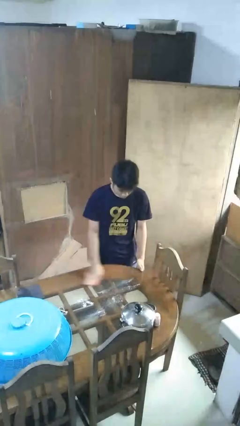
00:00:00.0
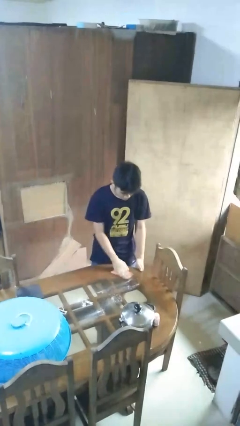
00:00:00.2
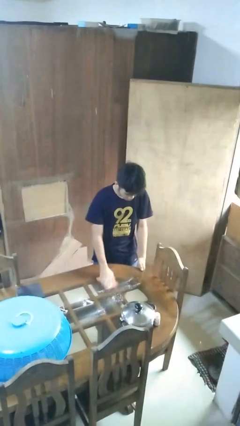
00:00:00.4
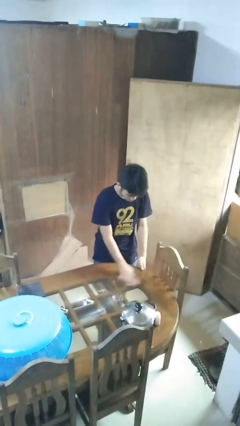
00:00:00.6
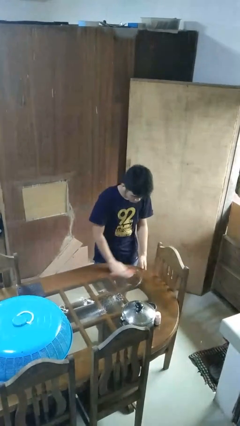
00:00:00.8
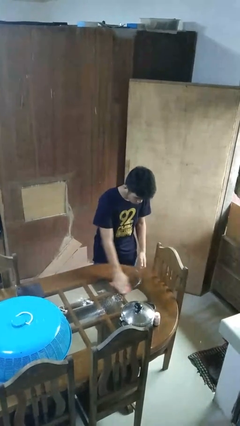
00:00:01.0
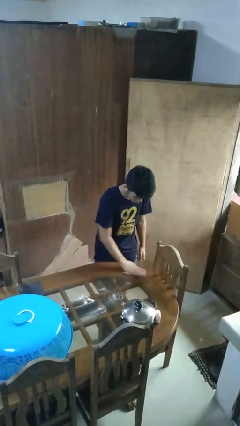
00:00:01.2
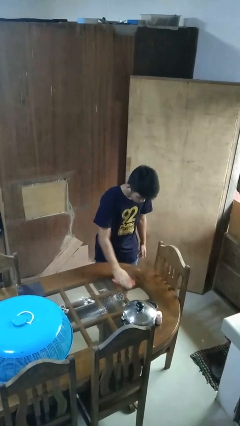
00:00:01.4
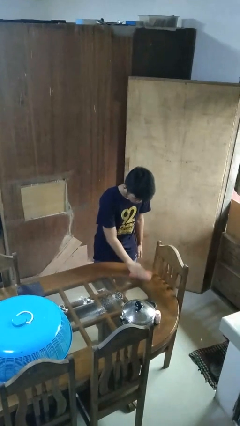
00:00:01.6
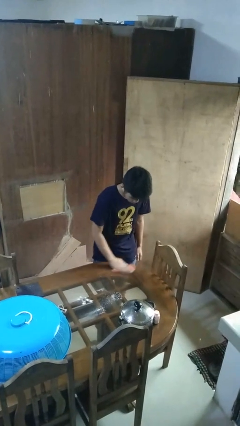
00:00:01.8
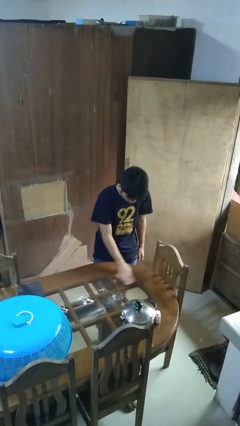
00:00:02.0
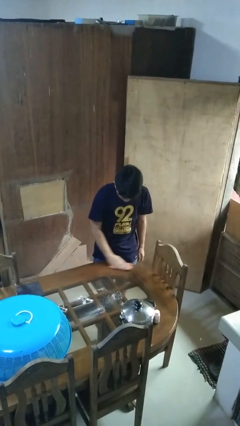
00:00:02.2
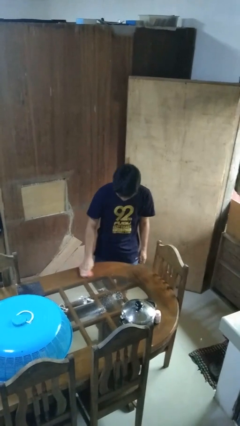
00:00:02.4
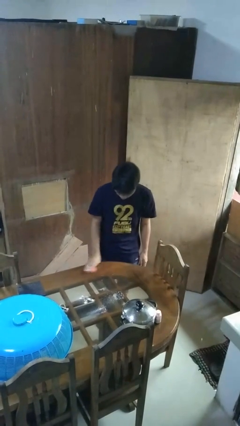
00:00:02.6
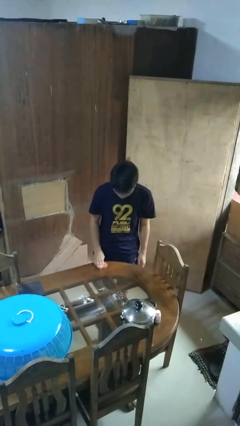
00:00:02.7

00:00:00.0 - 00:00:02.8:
person cleans table with rag

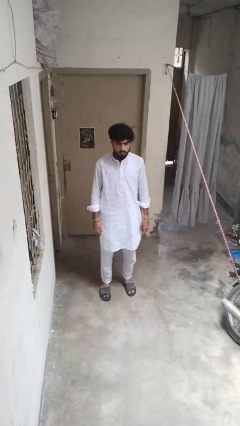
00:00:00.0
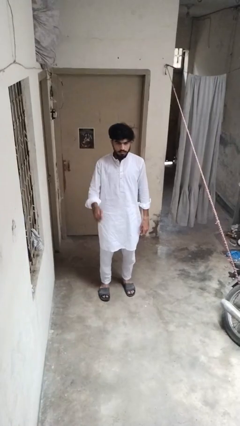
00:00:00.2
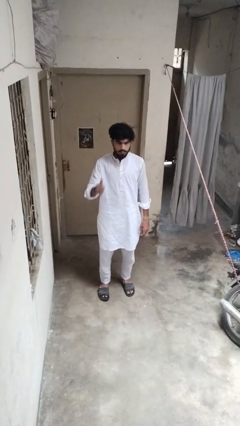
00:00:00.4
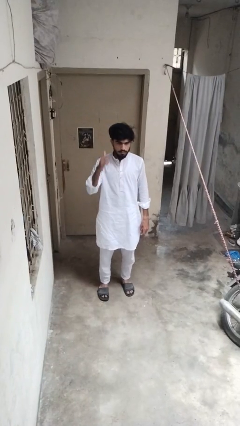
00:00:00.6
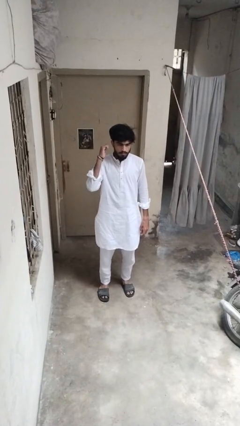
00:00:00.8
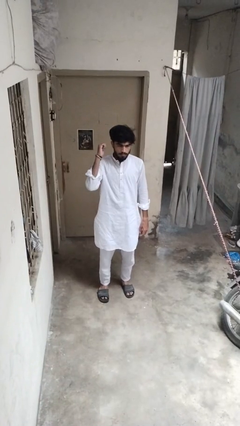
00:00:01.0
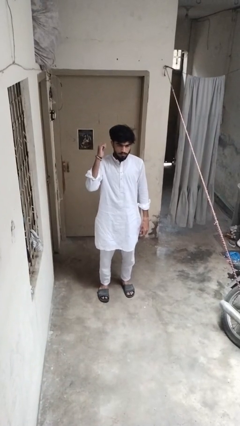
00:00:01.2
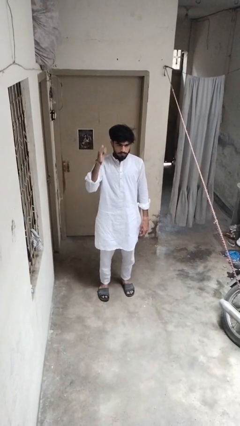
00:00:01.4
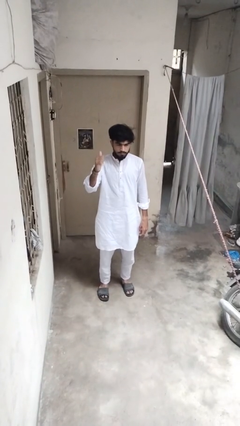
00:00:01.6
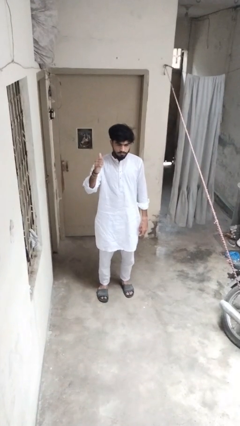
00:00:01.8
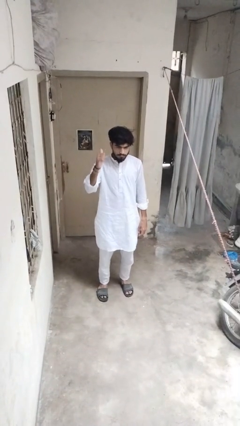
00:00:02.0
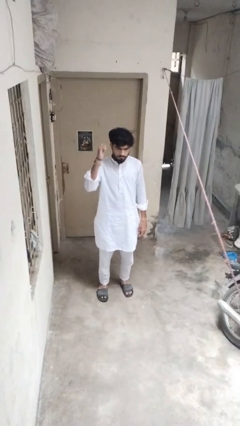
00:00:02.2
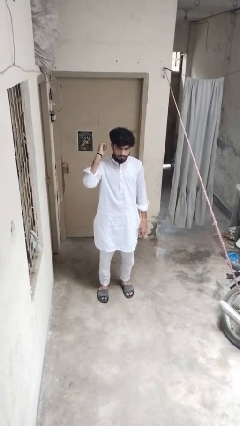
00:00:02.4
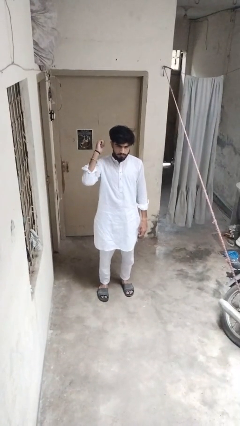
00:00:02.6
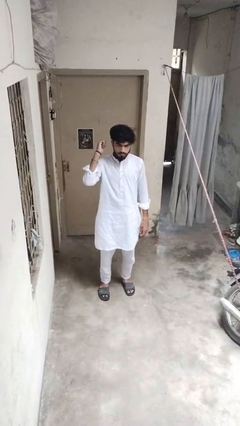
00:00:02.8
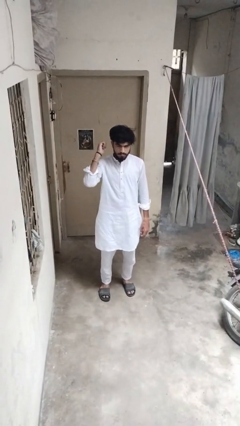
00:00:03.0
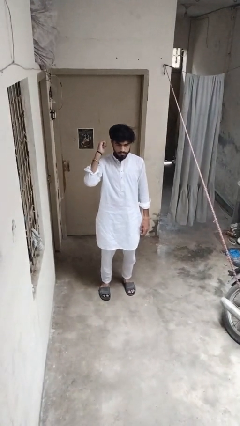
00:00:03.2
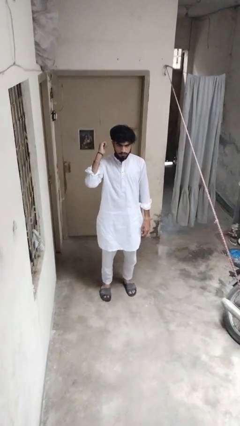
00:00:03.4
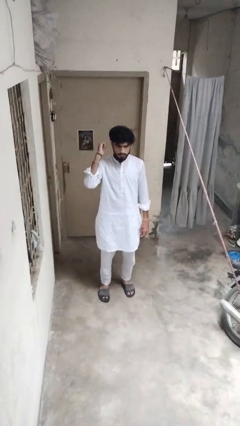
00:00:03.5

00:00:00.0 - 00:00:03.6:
person gestures behind me

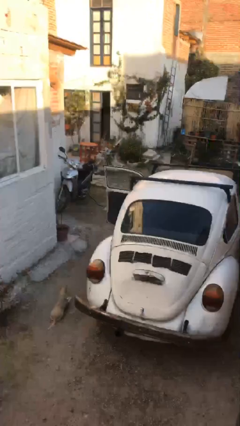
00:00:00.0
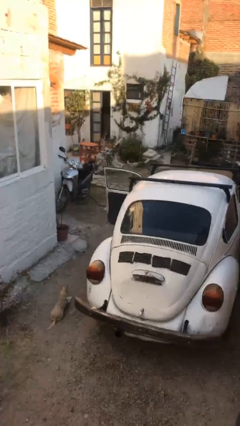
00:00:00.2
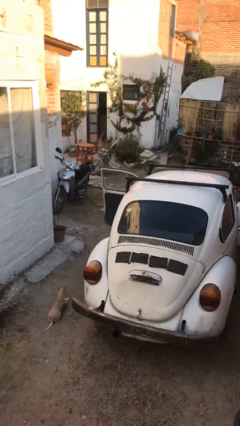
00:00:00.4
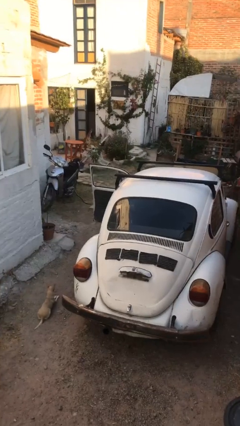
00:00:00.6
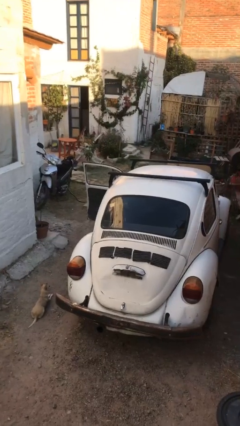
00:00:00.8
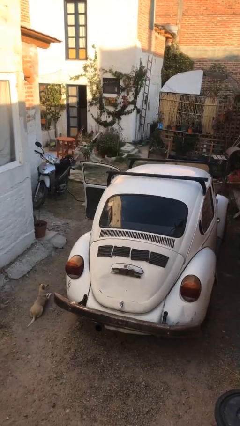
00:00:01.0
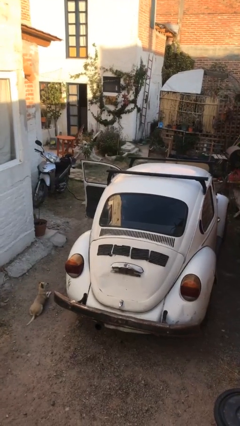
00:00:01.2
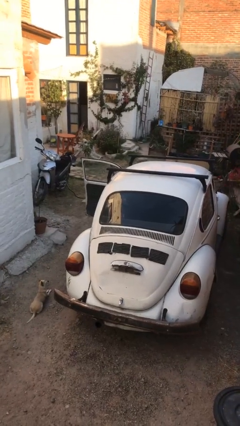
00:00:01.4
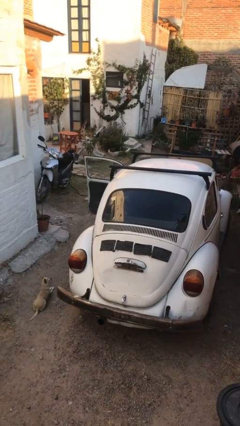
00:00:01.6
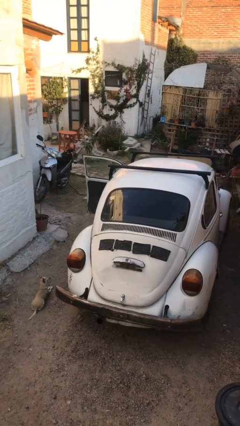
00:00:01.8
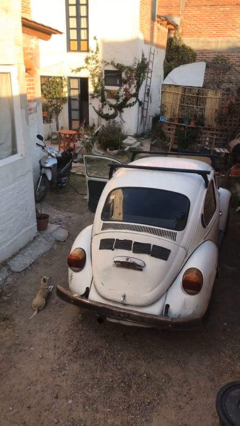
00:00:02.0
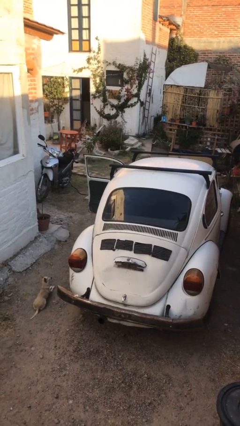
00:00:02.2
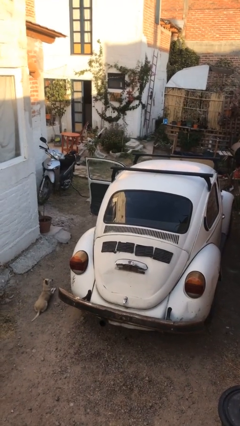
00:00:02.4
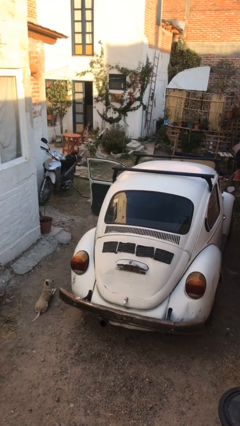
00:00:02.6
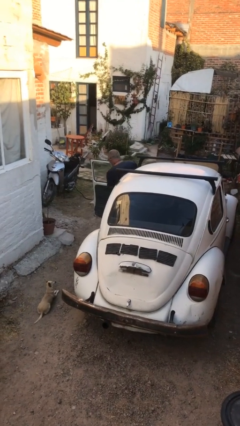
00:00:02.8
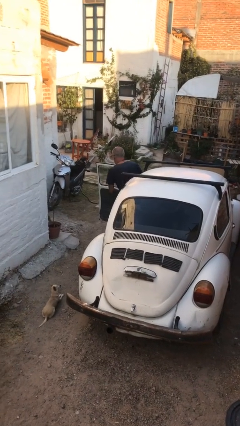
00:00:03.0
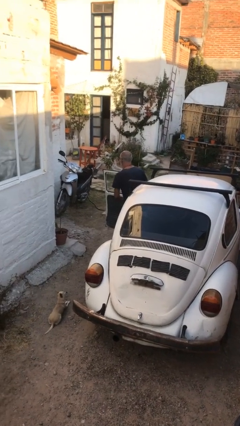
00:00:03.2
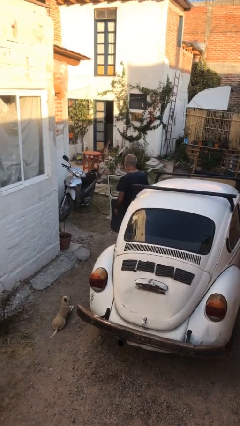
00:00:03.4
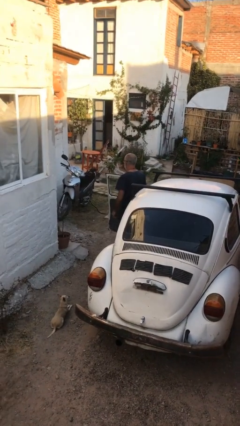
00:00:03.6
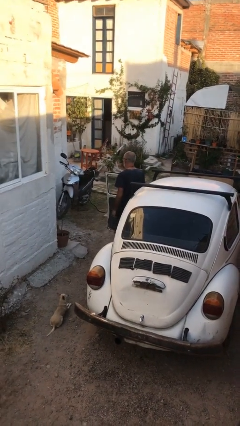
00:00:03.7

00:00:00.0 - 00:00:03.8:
person enters car

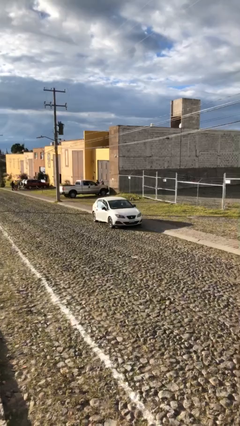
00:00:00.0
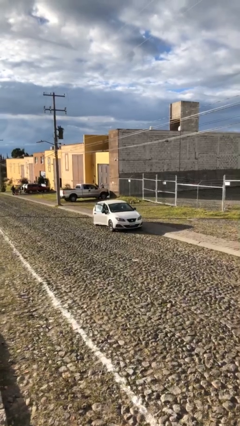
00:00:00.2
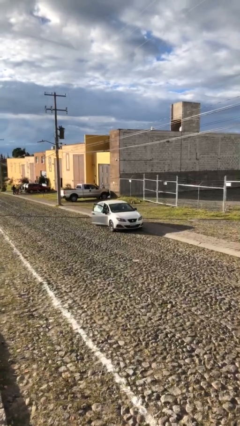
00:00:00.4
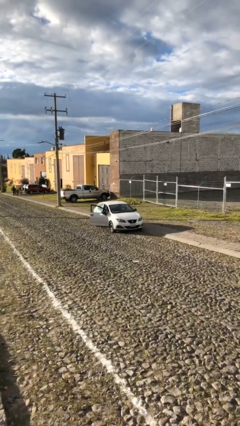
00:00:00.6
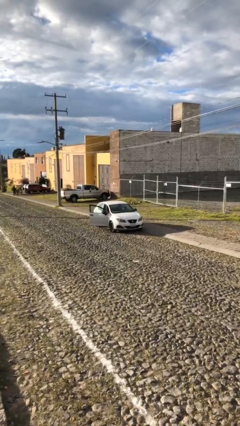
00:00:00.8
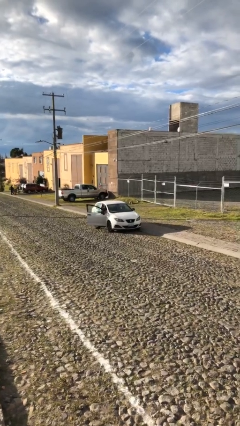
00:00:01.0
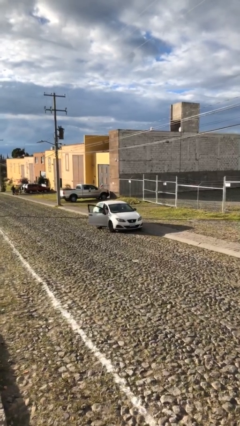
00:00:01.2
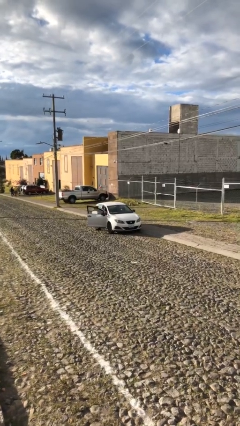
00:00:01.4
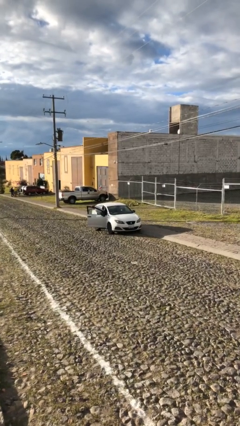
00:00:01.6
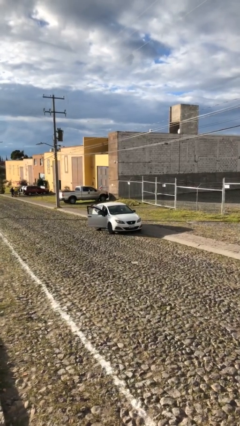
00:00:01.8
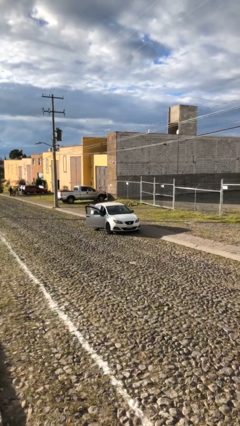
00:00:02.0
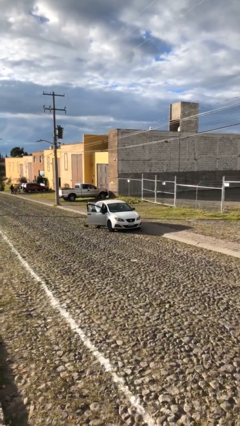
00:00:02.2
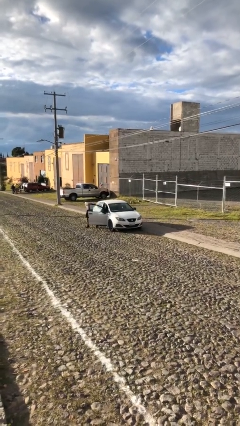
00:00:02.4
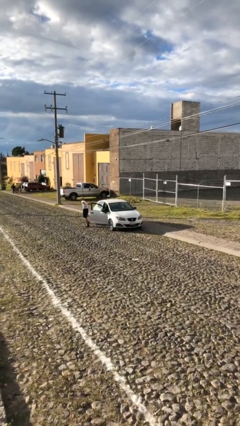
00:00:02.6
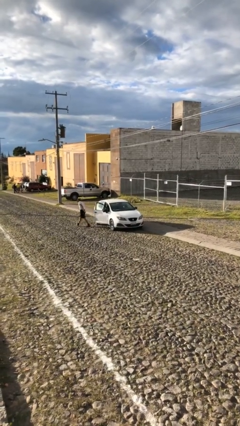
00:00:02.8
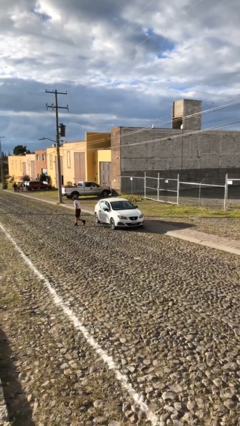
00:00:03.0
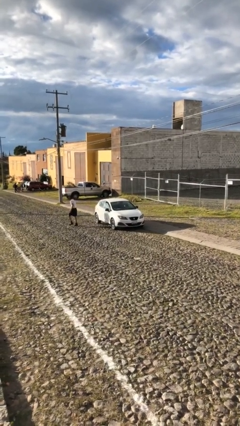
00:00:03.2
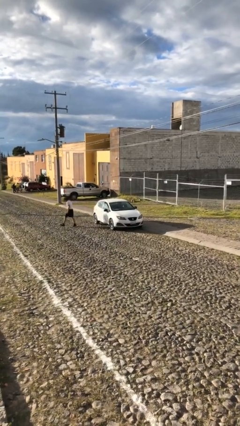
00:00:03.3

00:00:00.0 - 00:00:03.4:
car drops off person

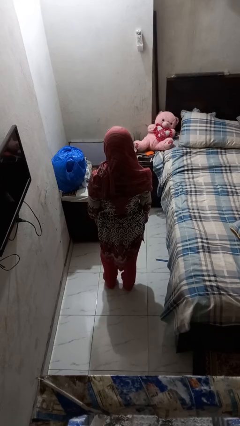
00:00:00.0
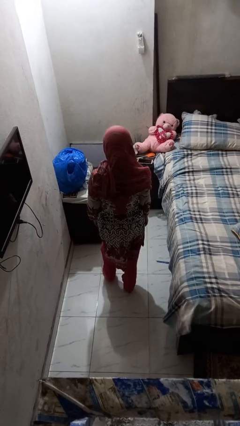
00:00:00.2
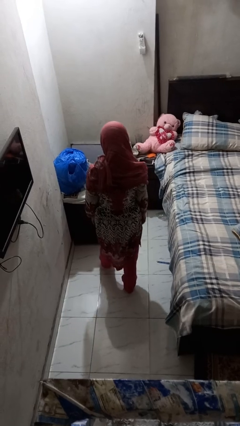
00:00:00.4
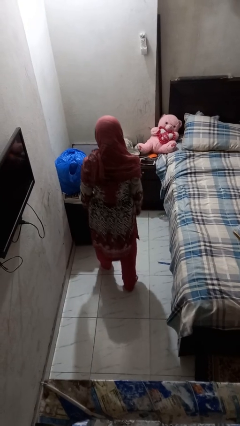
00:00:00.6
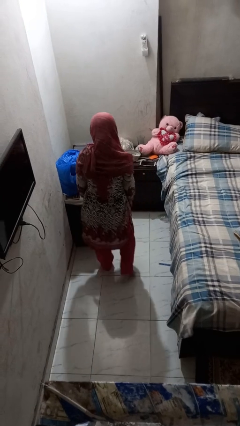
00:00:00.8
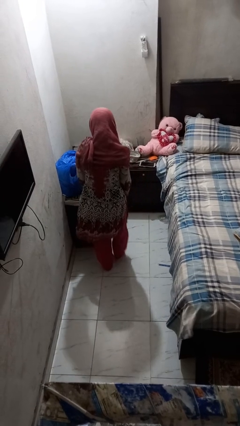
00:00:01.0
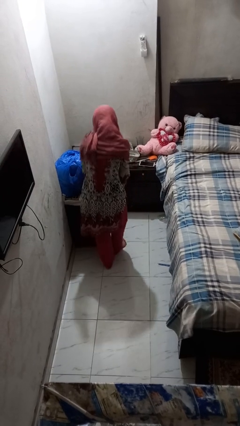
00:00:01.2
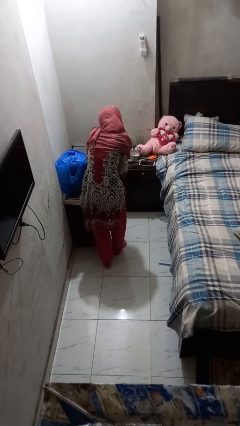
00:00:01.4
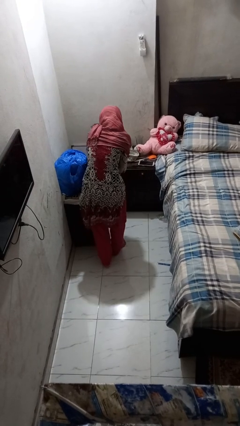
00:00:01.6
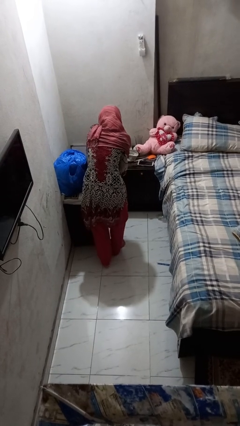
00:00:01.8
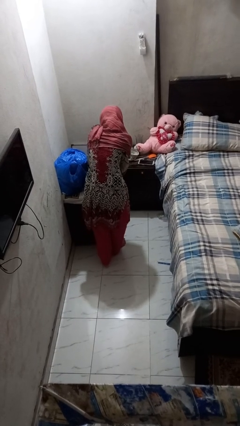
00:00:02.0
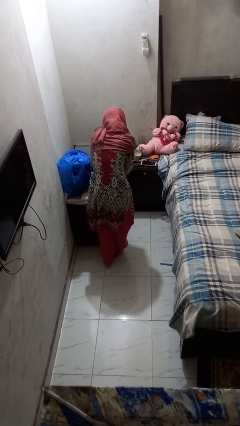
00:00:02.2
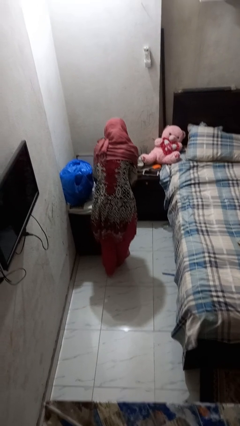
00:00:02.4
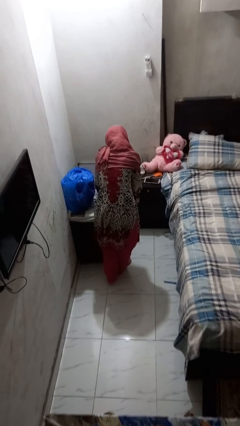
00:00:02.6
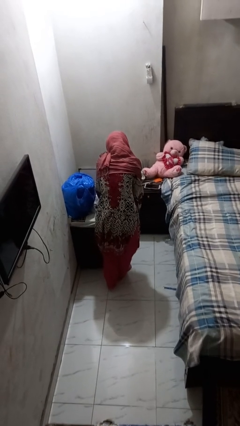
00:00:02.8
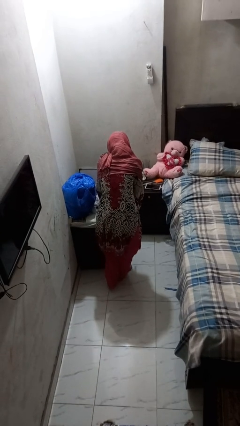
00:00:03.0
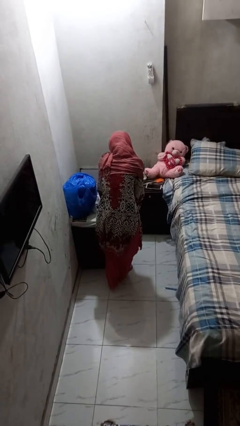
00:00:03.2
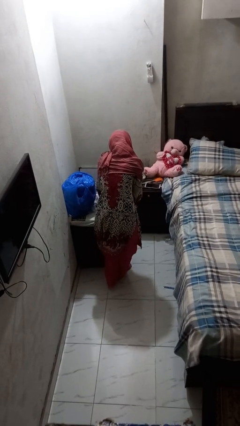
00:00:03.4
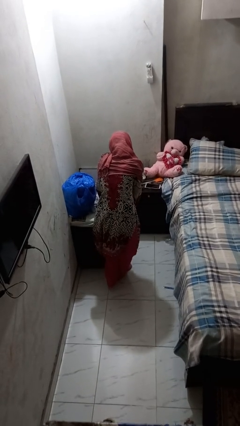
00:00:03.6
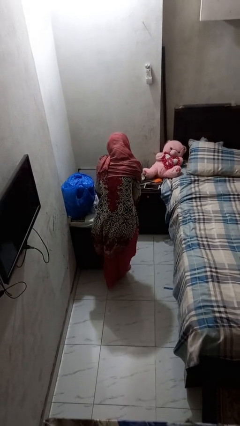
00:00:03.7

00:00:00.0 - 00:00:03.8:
person bumps into table
